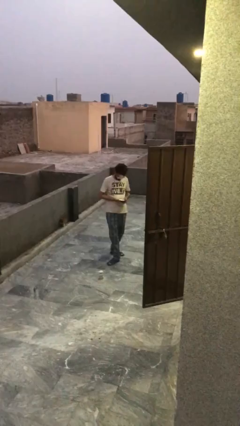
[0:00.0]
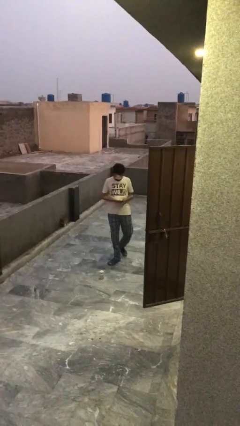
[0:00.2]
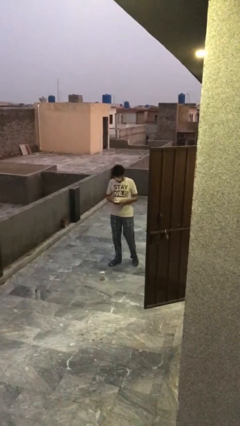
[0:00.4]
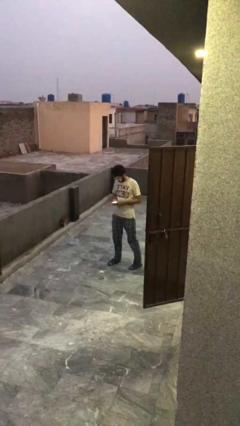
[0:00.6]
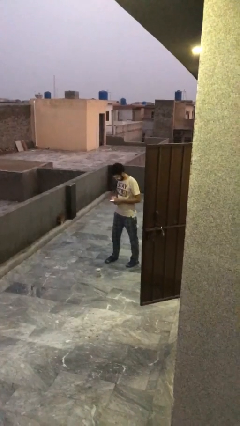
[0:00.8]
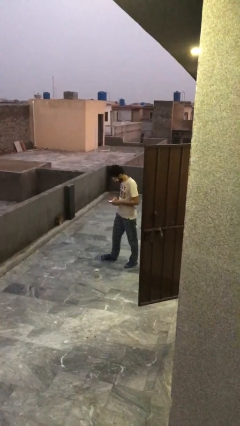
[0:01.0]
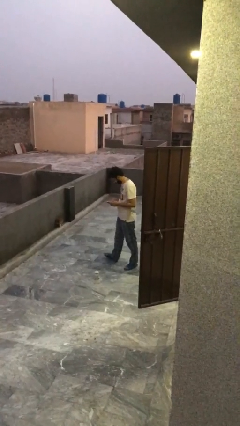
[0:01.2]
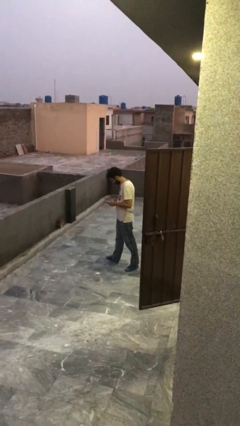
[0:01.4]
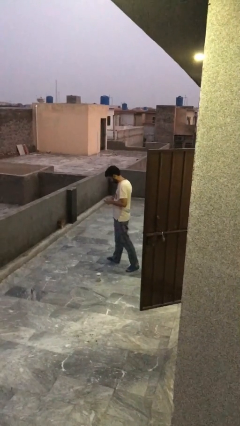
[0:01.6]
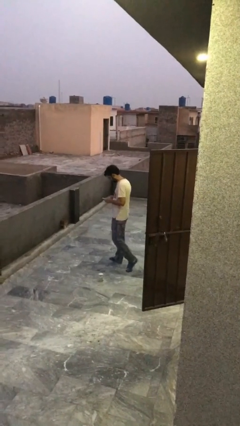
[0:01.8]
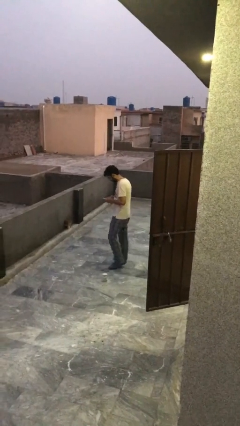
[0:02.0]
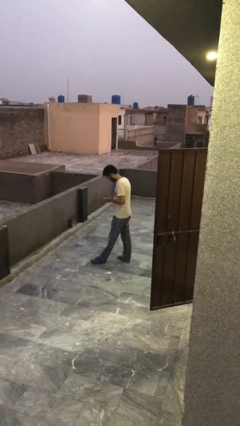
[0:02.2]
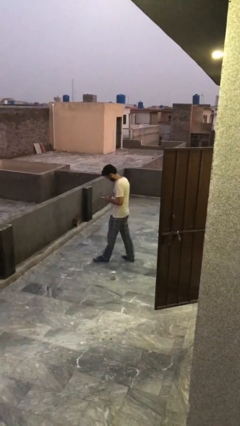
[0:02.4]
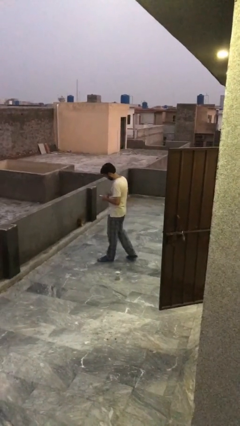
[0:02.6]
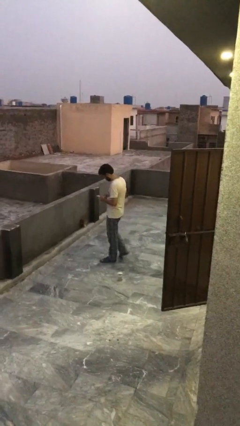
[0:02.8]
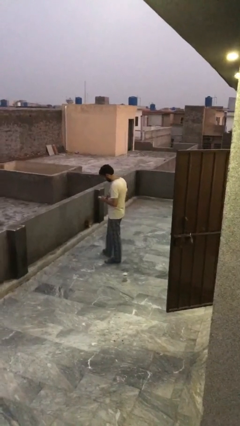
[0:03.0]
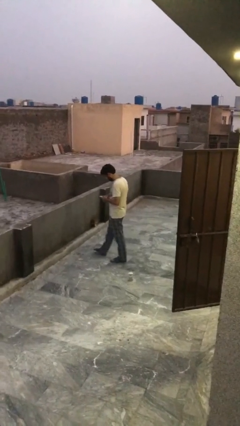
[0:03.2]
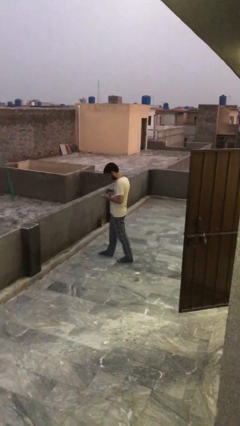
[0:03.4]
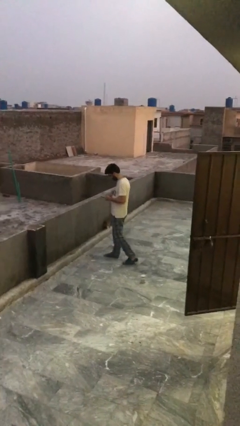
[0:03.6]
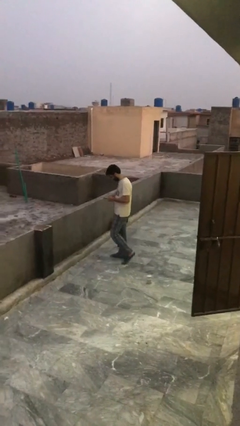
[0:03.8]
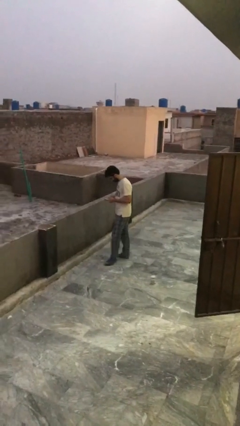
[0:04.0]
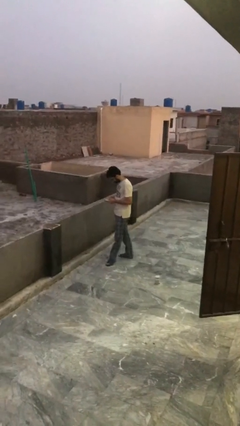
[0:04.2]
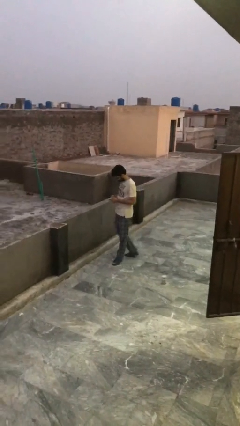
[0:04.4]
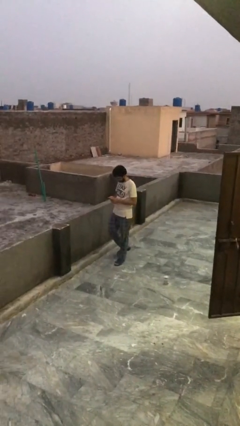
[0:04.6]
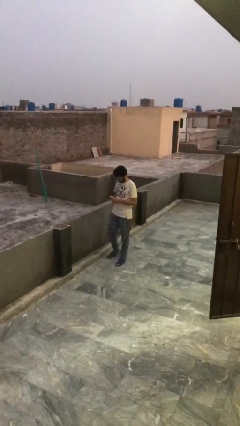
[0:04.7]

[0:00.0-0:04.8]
person texts on phone

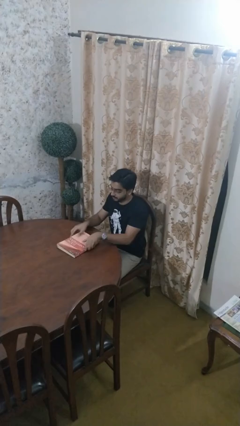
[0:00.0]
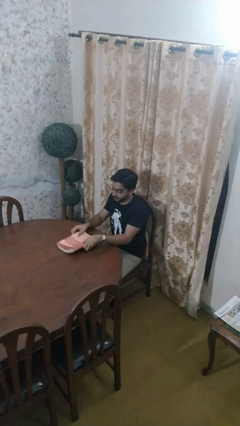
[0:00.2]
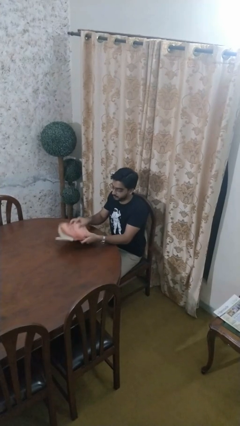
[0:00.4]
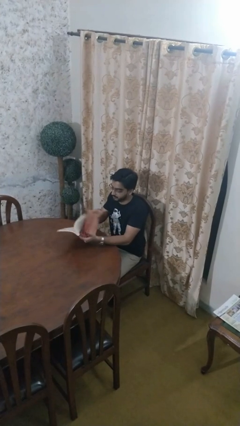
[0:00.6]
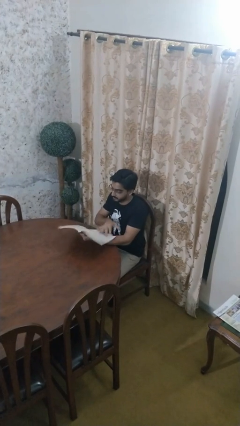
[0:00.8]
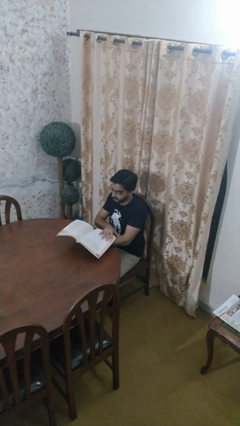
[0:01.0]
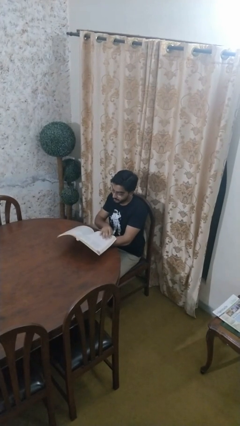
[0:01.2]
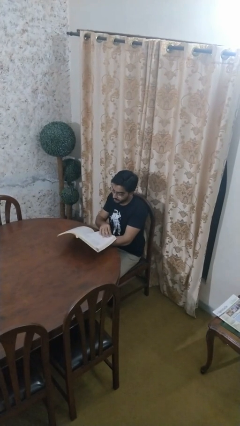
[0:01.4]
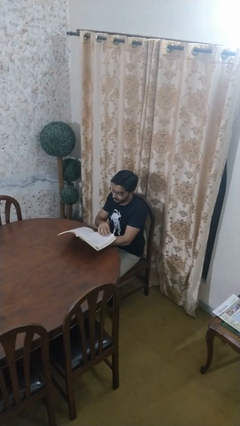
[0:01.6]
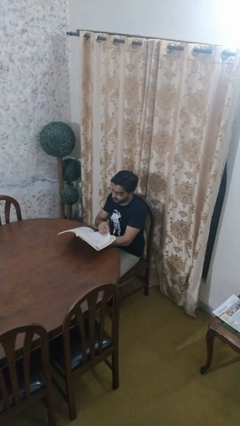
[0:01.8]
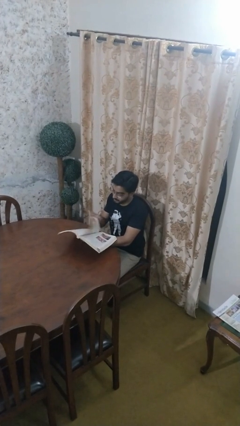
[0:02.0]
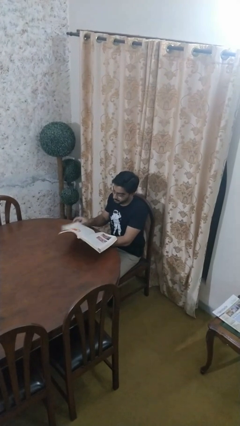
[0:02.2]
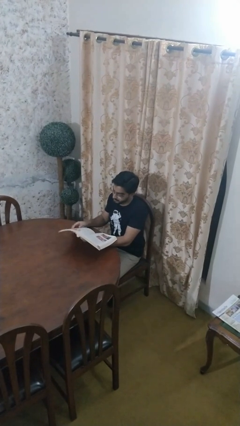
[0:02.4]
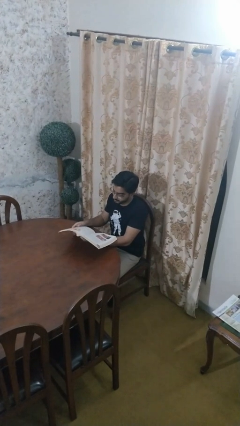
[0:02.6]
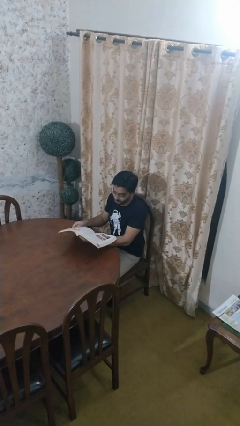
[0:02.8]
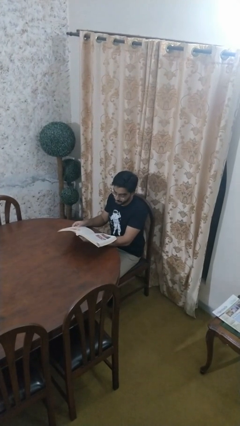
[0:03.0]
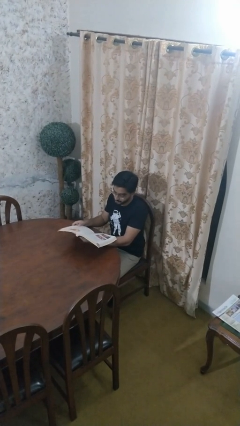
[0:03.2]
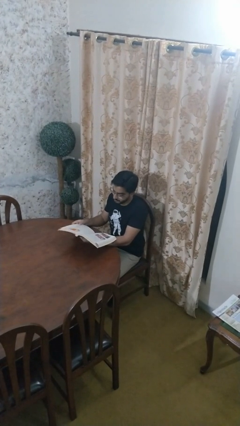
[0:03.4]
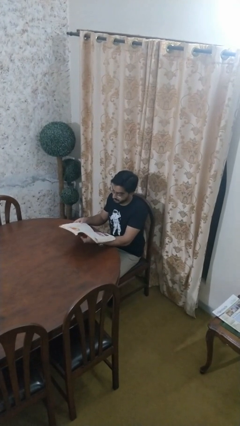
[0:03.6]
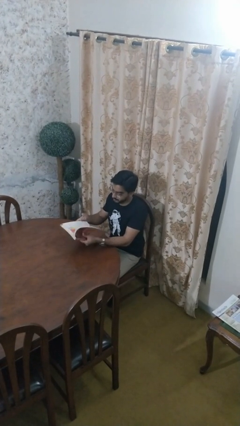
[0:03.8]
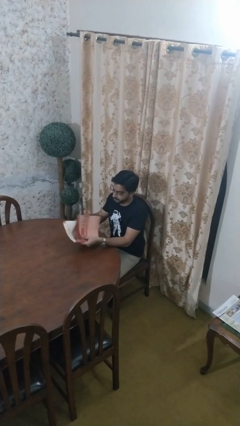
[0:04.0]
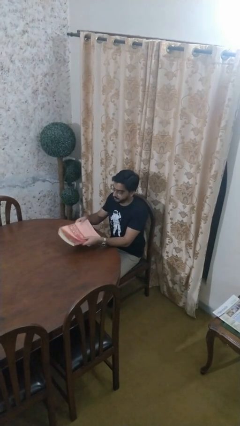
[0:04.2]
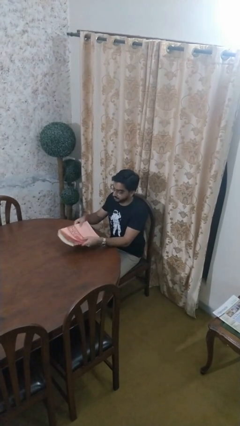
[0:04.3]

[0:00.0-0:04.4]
person reads book

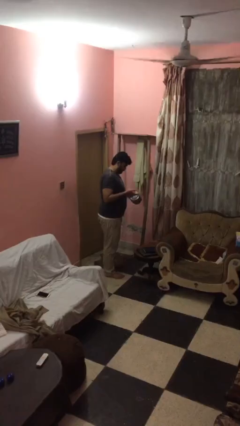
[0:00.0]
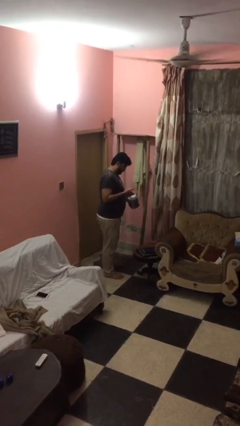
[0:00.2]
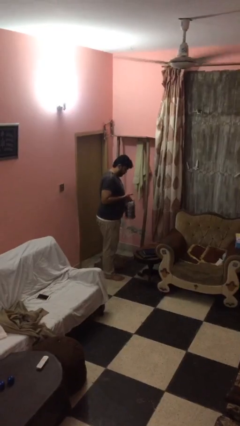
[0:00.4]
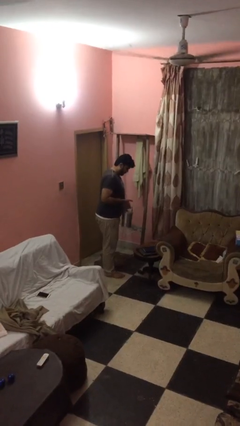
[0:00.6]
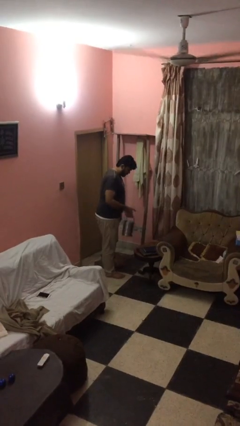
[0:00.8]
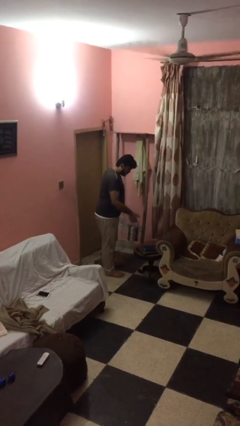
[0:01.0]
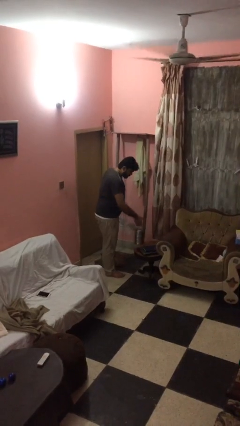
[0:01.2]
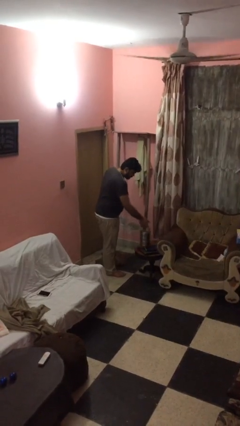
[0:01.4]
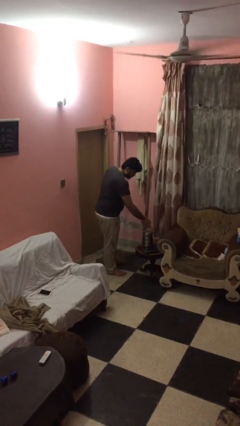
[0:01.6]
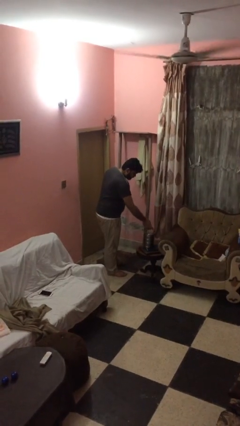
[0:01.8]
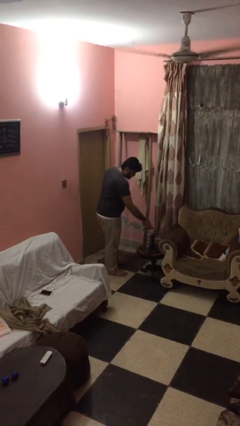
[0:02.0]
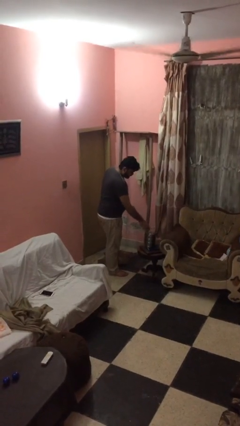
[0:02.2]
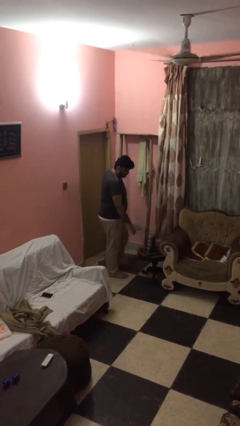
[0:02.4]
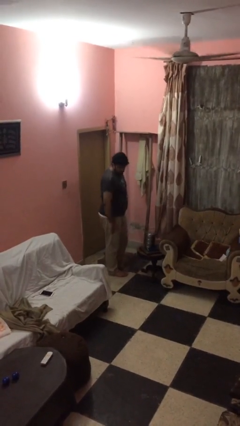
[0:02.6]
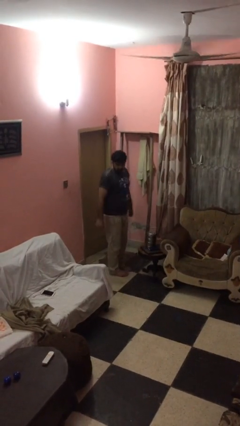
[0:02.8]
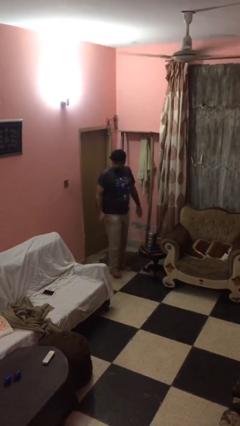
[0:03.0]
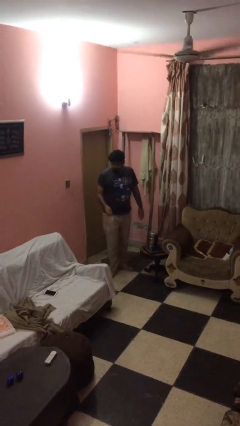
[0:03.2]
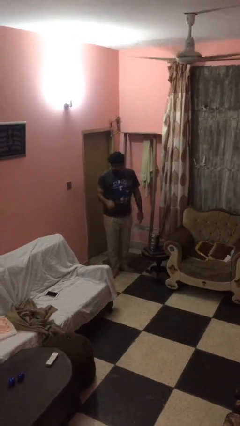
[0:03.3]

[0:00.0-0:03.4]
person puts down object on table

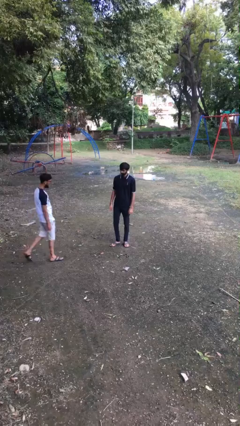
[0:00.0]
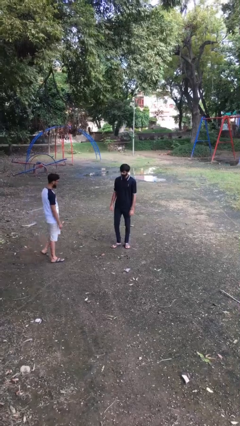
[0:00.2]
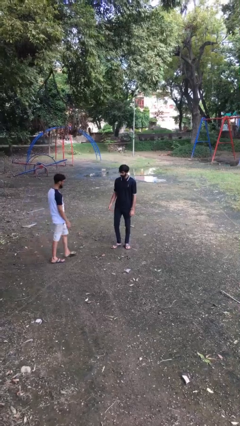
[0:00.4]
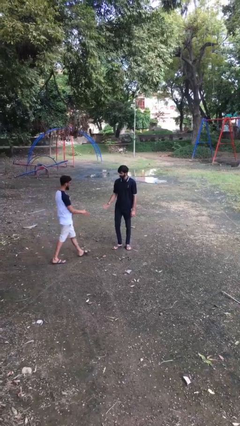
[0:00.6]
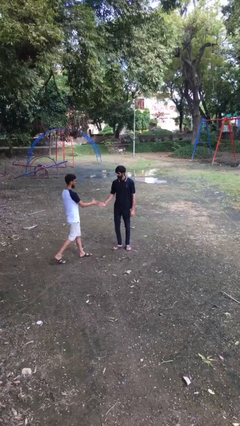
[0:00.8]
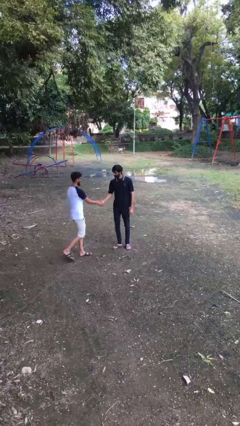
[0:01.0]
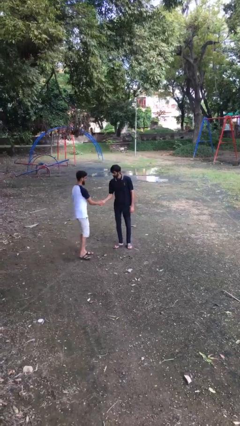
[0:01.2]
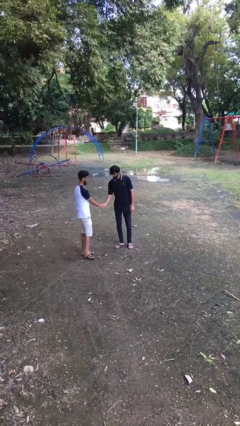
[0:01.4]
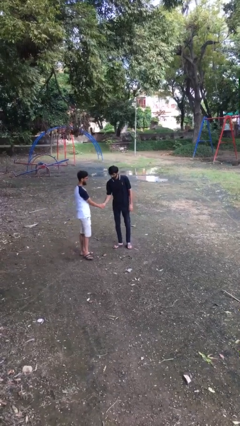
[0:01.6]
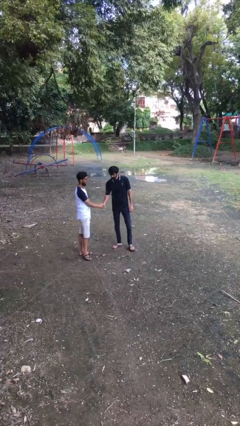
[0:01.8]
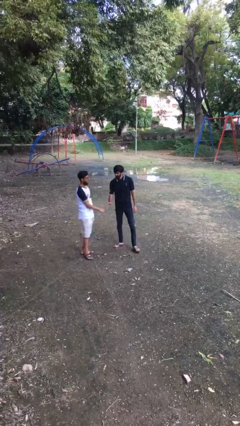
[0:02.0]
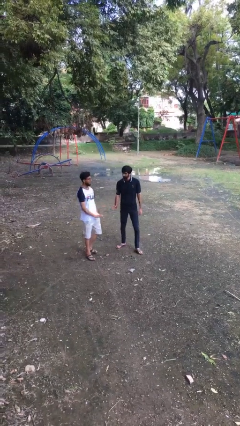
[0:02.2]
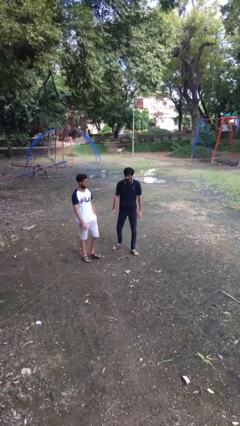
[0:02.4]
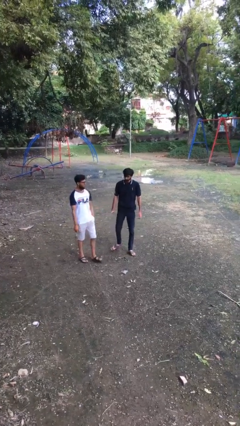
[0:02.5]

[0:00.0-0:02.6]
person shakes hand

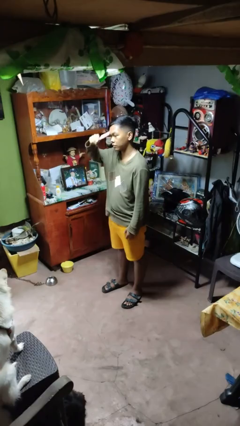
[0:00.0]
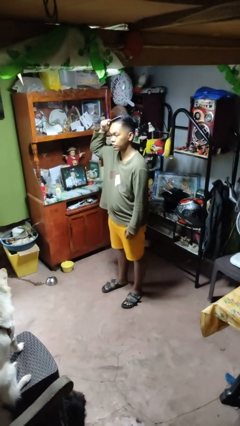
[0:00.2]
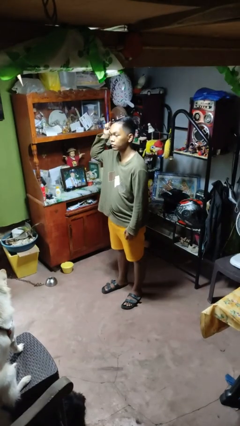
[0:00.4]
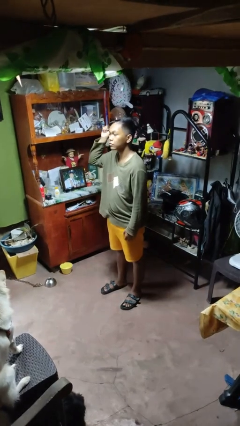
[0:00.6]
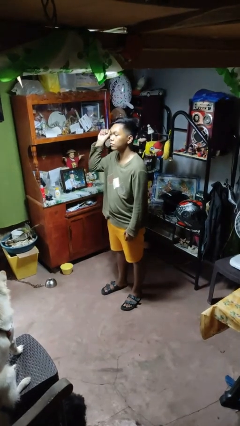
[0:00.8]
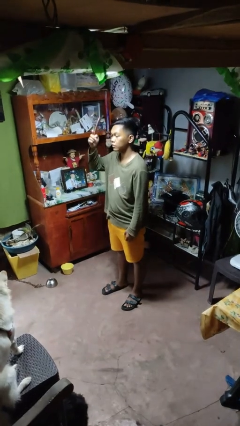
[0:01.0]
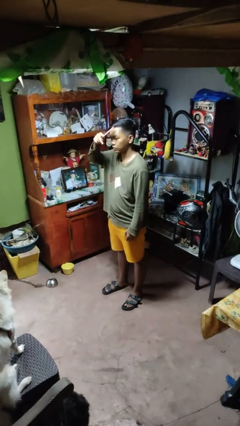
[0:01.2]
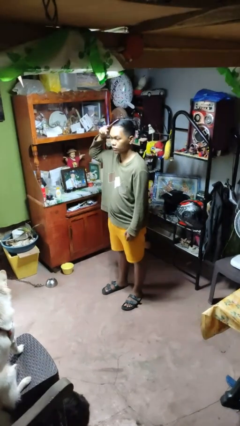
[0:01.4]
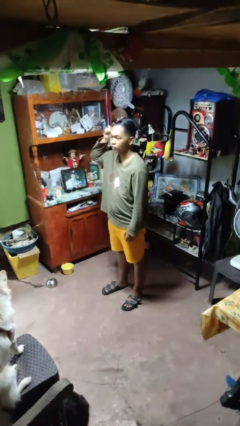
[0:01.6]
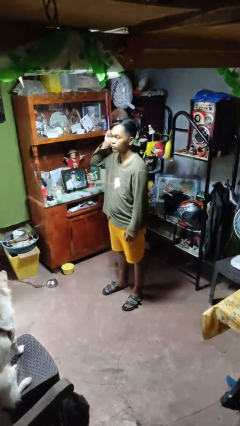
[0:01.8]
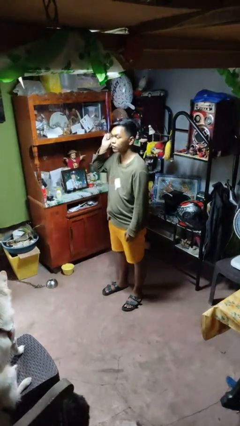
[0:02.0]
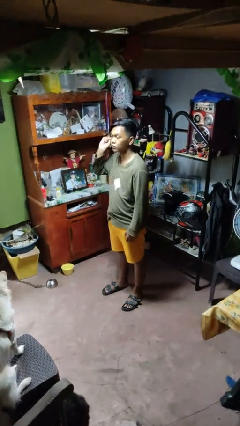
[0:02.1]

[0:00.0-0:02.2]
person brushes hair
